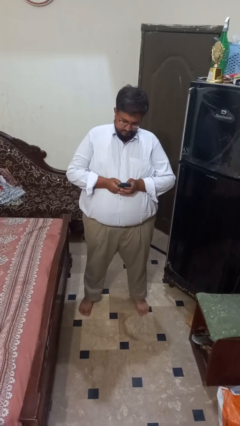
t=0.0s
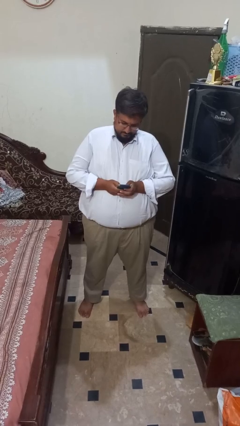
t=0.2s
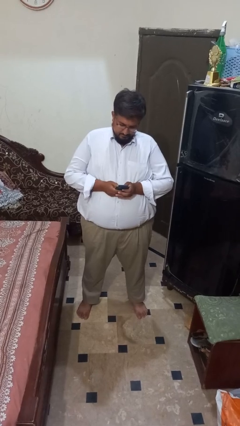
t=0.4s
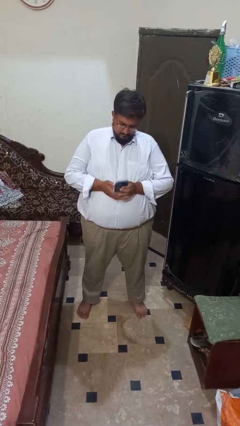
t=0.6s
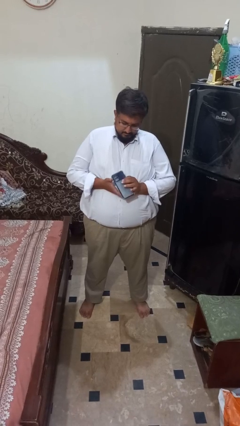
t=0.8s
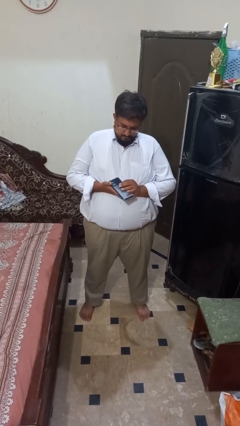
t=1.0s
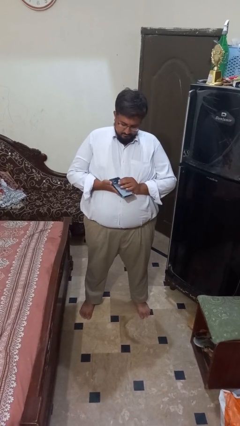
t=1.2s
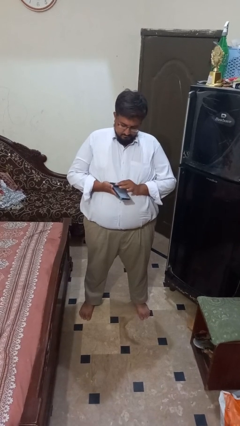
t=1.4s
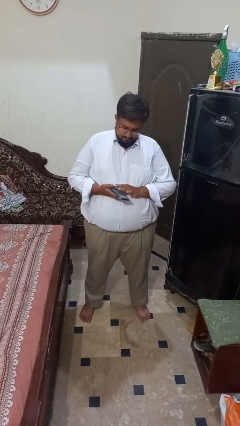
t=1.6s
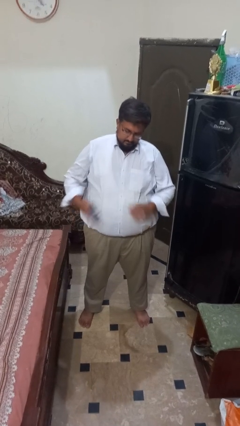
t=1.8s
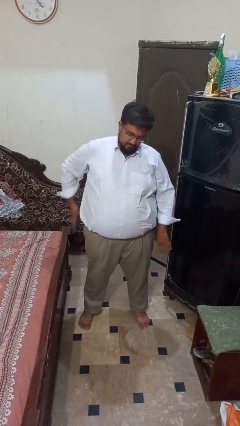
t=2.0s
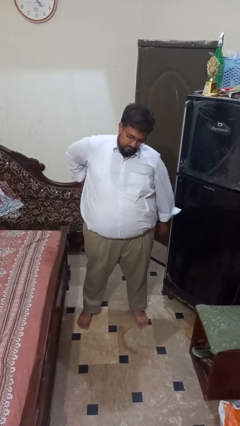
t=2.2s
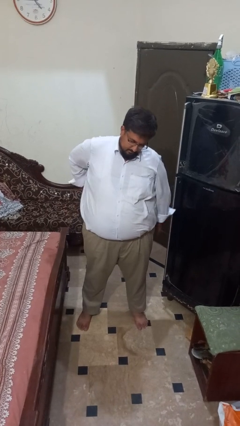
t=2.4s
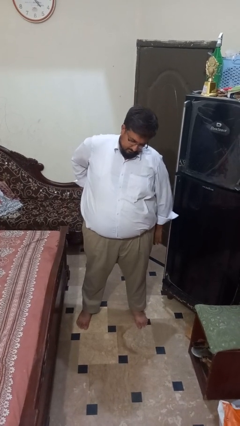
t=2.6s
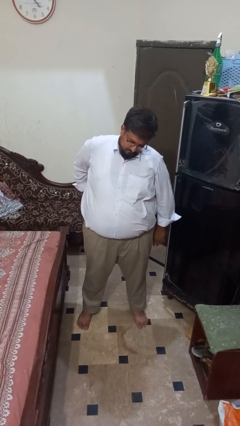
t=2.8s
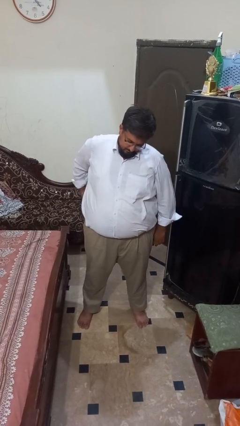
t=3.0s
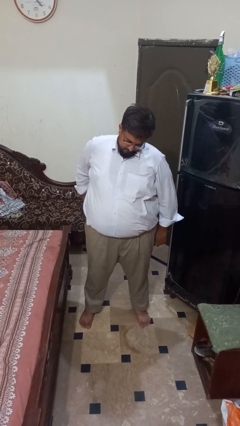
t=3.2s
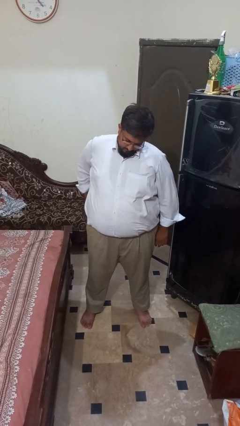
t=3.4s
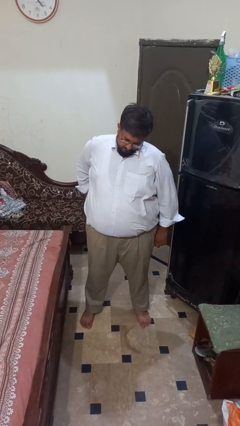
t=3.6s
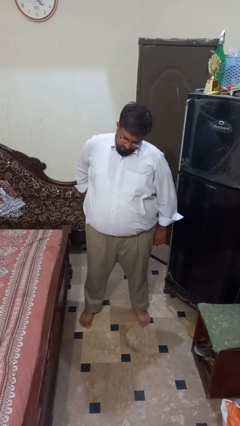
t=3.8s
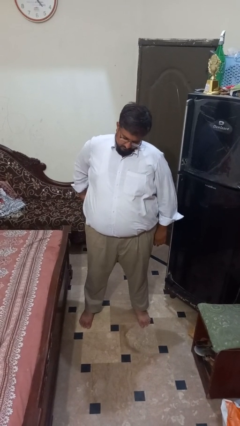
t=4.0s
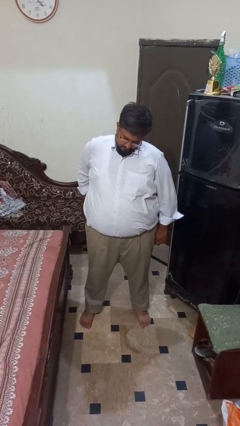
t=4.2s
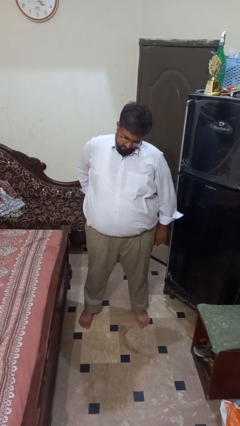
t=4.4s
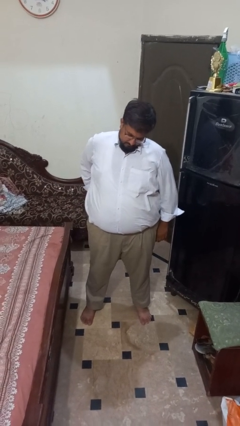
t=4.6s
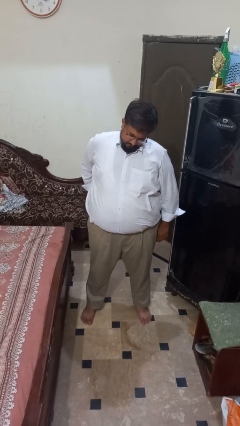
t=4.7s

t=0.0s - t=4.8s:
person puts phone into pocket

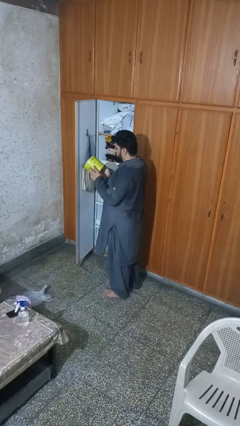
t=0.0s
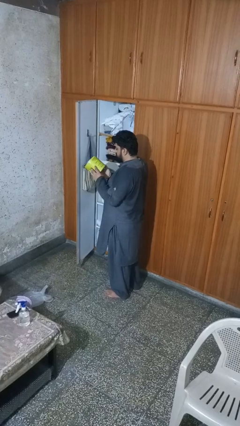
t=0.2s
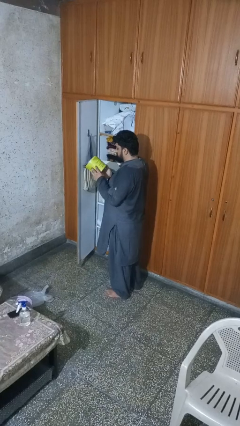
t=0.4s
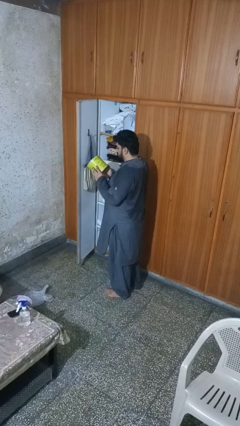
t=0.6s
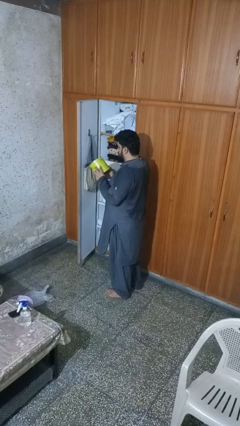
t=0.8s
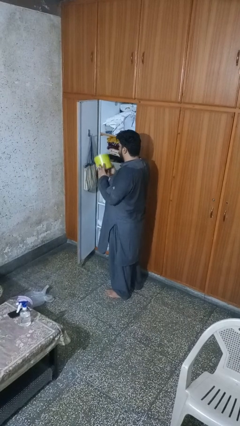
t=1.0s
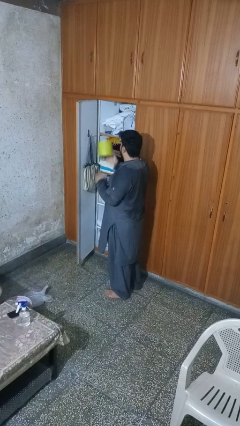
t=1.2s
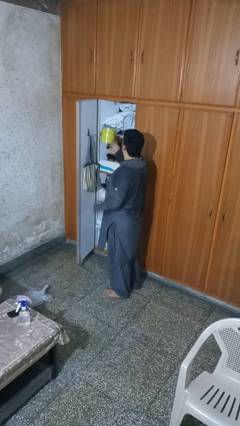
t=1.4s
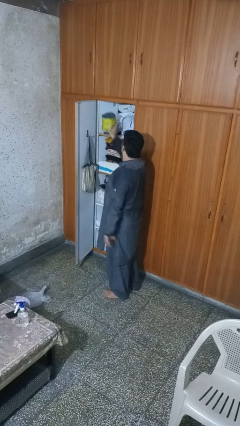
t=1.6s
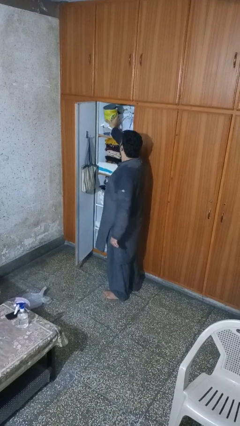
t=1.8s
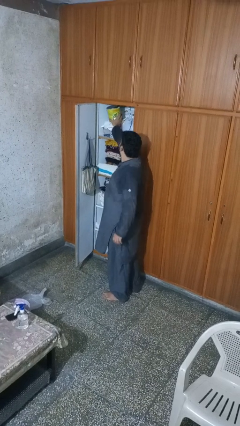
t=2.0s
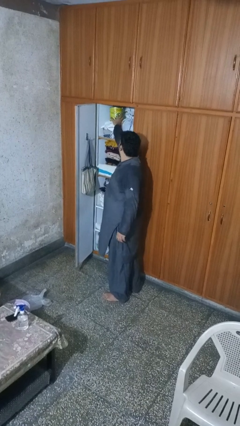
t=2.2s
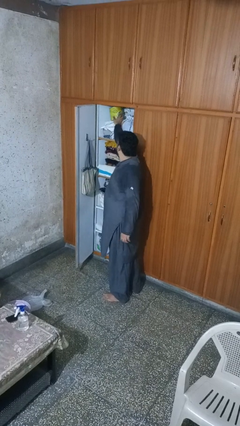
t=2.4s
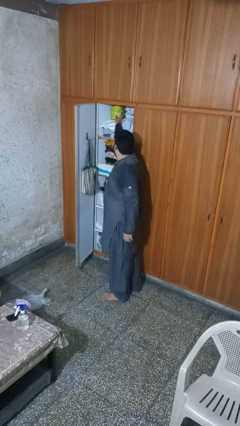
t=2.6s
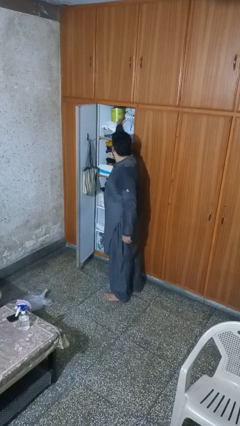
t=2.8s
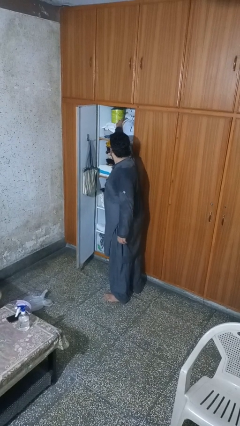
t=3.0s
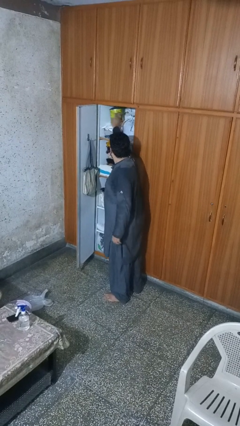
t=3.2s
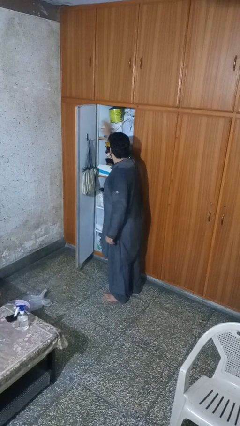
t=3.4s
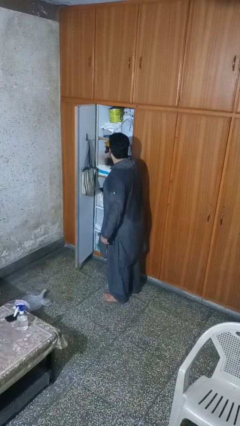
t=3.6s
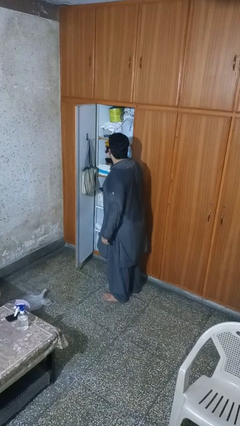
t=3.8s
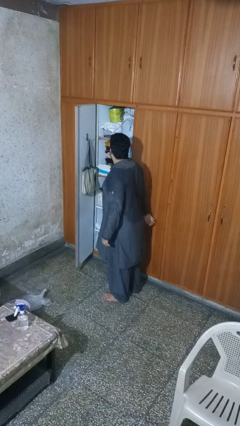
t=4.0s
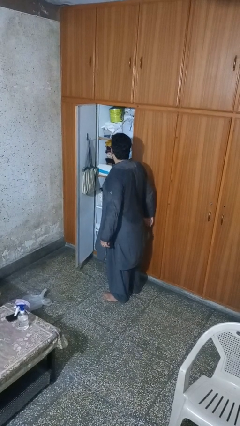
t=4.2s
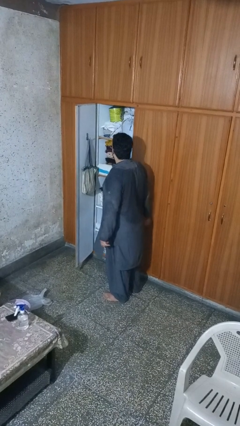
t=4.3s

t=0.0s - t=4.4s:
person puts down object on shelf

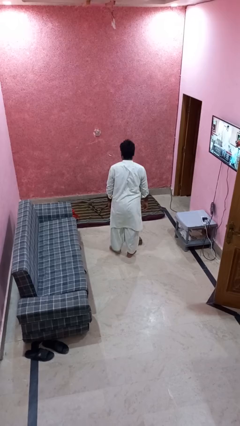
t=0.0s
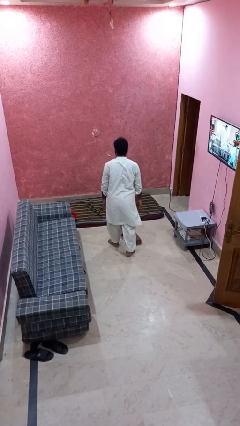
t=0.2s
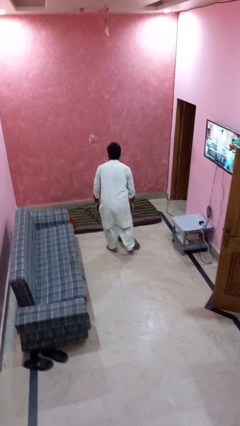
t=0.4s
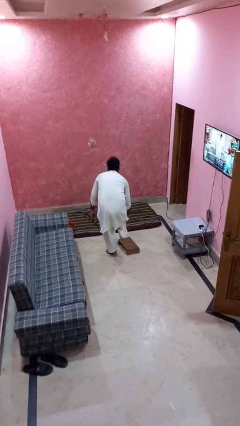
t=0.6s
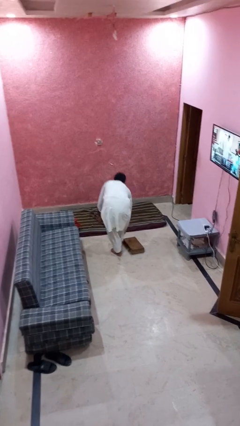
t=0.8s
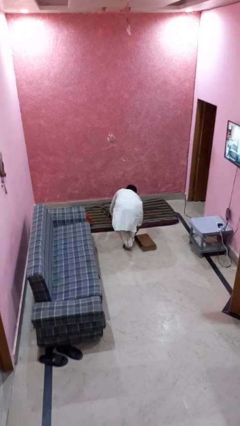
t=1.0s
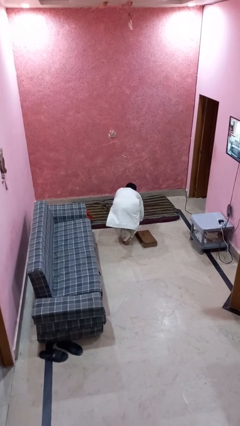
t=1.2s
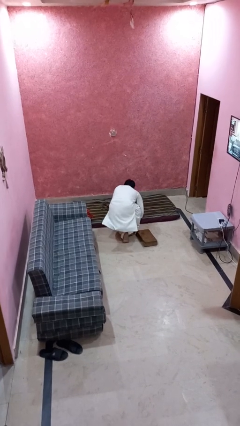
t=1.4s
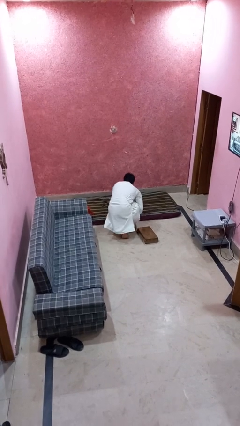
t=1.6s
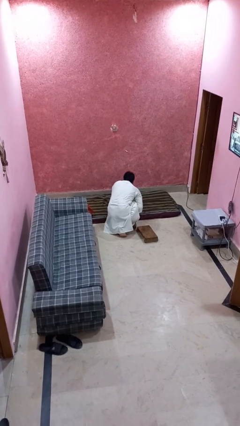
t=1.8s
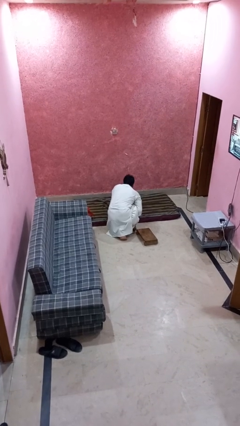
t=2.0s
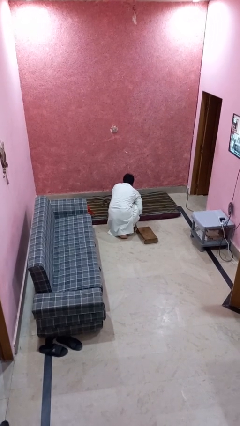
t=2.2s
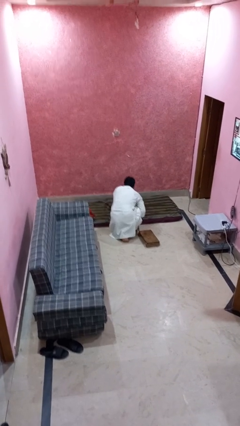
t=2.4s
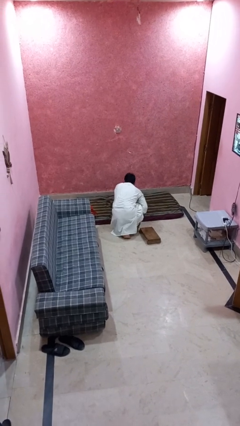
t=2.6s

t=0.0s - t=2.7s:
person trips on object on floor

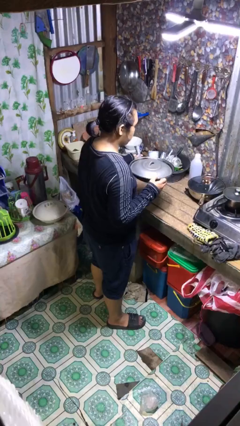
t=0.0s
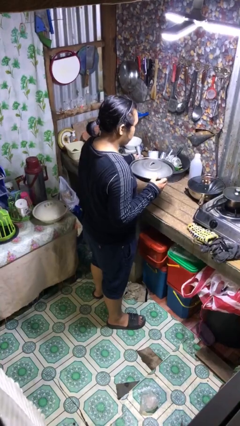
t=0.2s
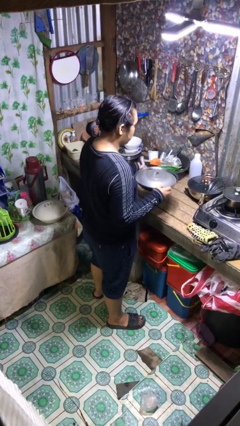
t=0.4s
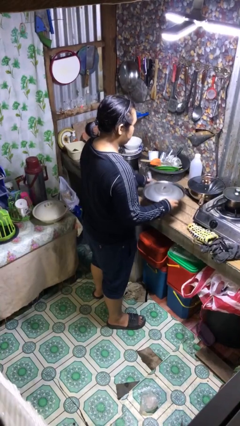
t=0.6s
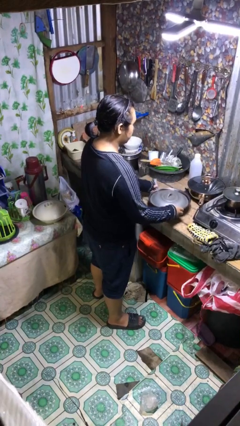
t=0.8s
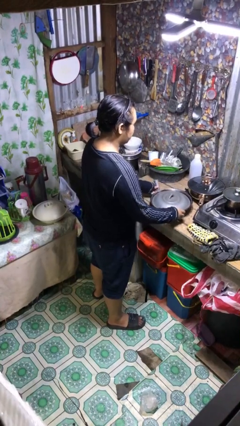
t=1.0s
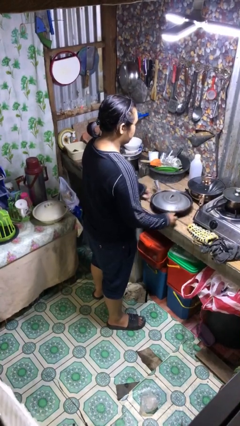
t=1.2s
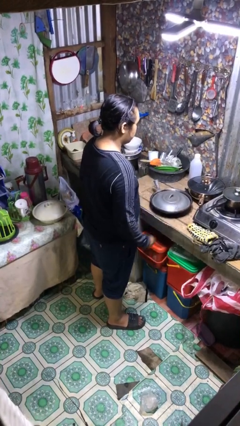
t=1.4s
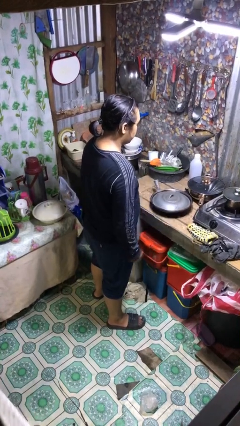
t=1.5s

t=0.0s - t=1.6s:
person puts down object on countertop

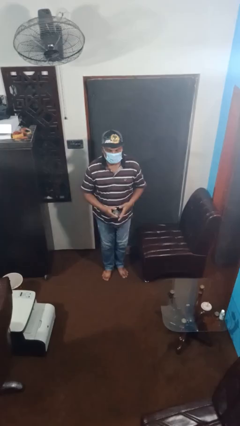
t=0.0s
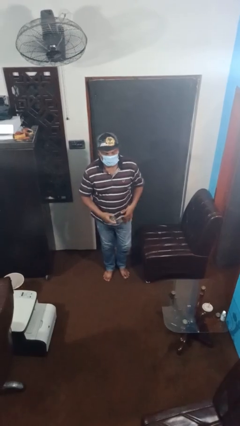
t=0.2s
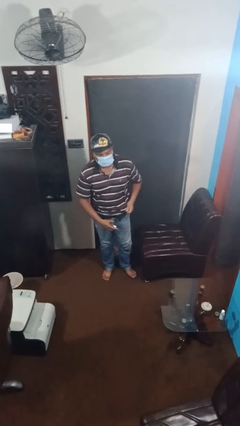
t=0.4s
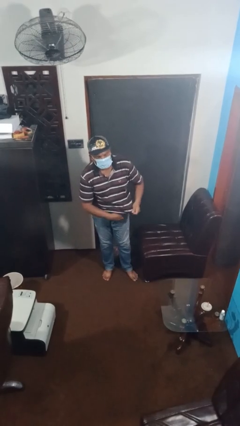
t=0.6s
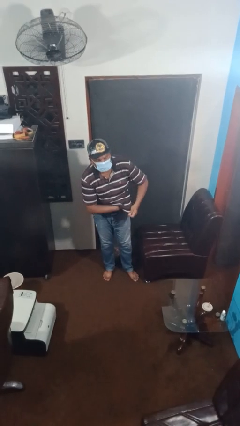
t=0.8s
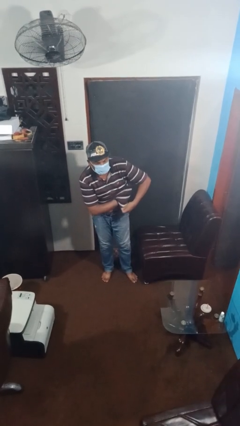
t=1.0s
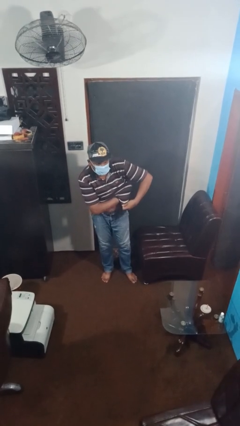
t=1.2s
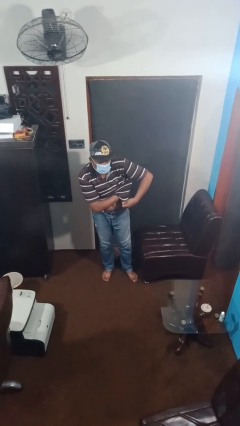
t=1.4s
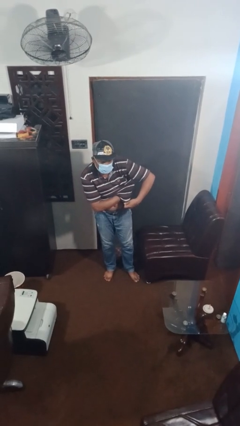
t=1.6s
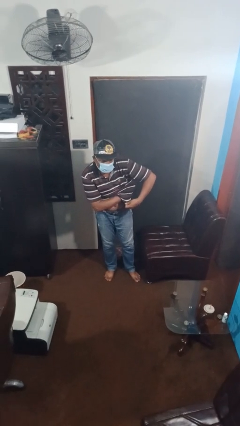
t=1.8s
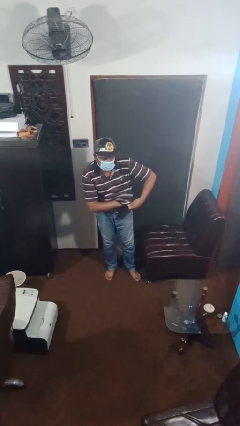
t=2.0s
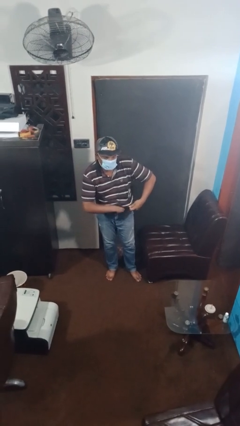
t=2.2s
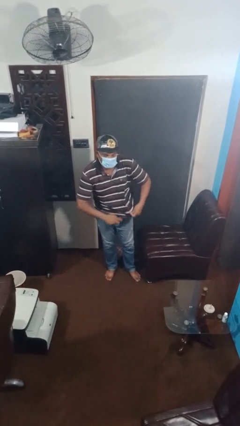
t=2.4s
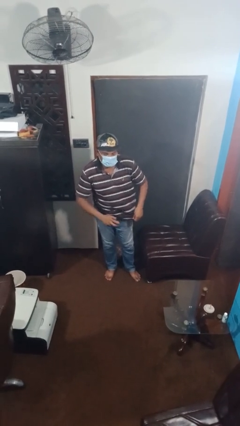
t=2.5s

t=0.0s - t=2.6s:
person applies deodorant

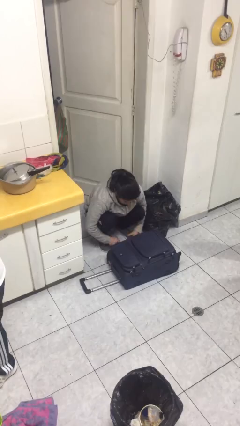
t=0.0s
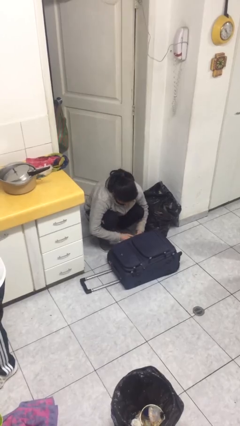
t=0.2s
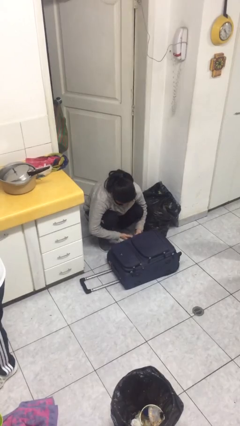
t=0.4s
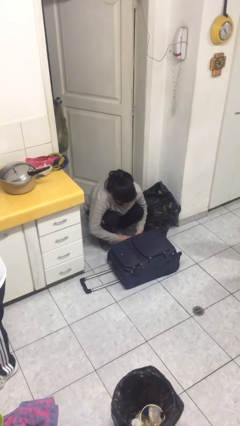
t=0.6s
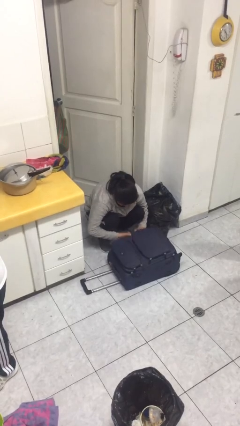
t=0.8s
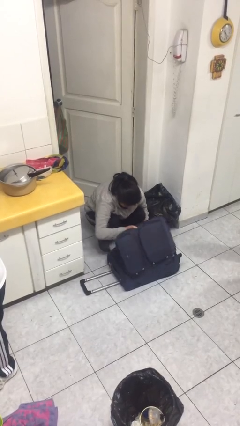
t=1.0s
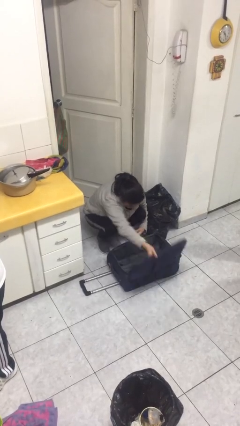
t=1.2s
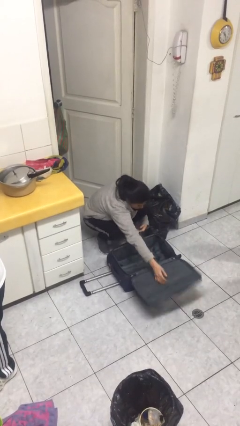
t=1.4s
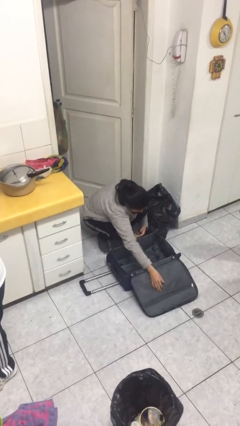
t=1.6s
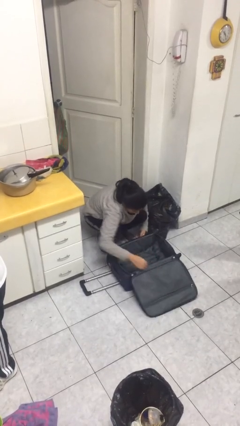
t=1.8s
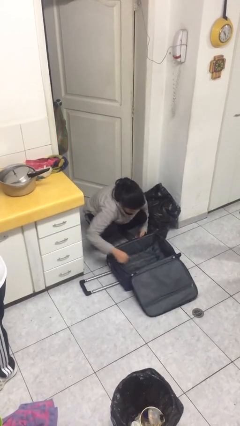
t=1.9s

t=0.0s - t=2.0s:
person opens suitcase
